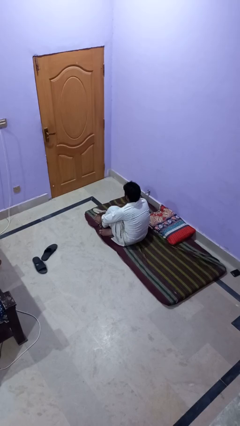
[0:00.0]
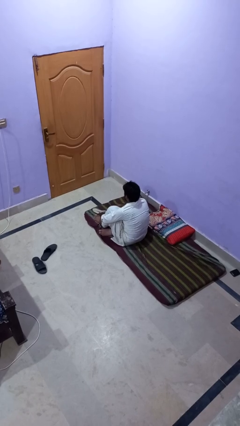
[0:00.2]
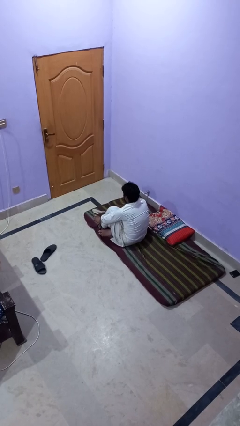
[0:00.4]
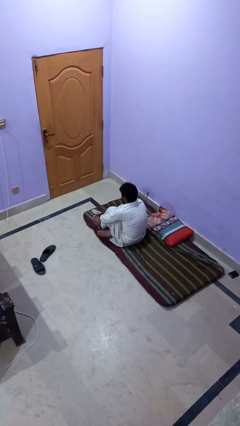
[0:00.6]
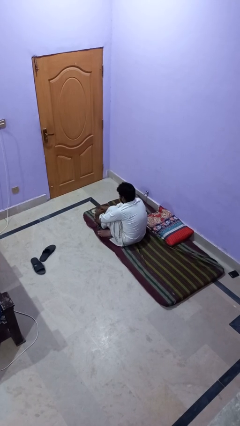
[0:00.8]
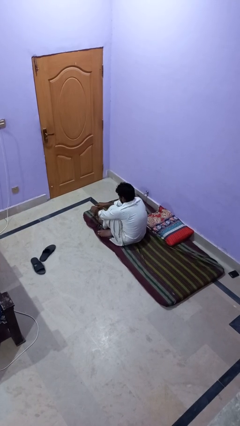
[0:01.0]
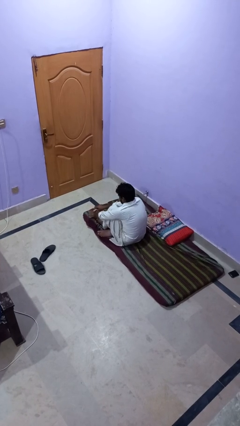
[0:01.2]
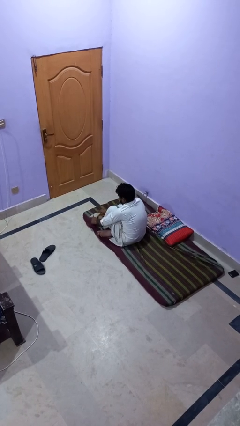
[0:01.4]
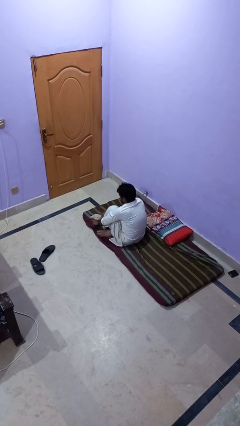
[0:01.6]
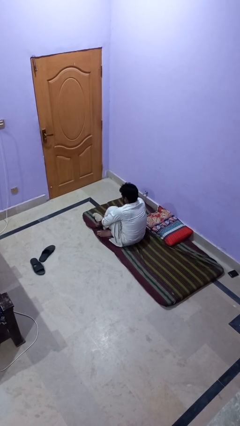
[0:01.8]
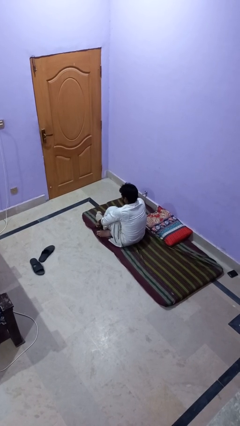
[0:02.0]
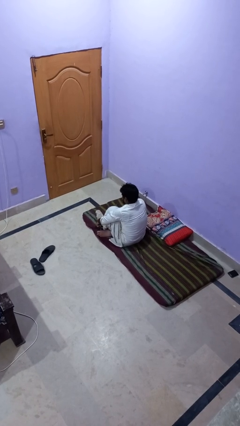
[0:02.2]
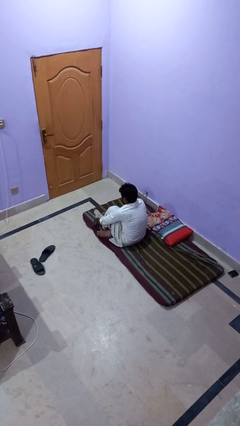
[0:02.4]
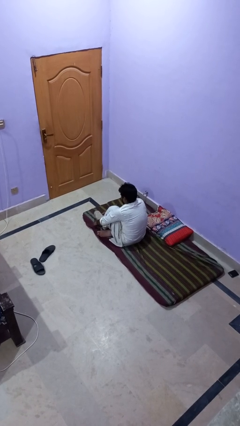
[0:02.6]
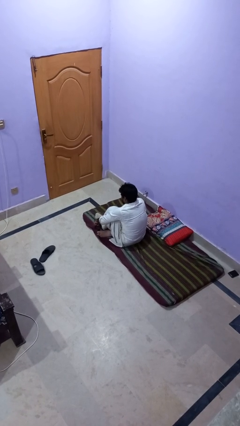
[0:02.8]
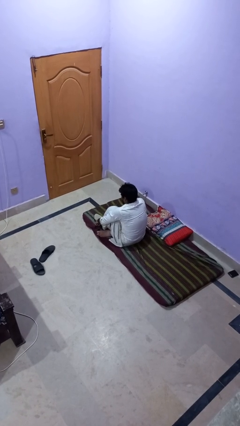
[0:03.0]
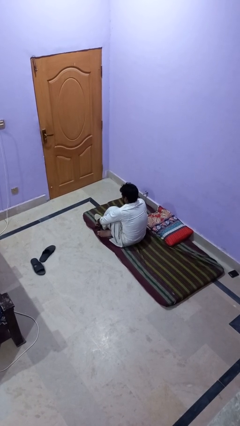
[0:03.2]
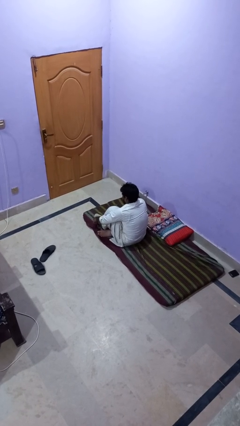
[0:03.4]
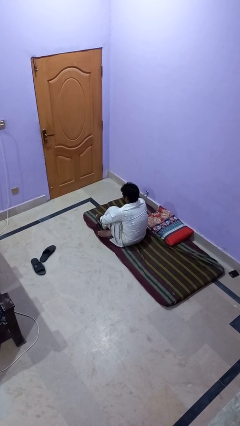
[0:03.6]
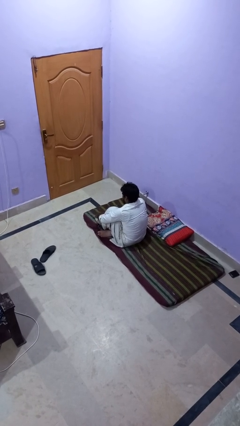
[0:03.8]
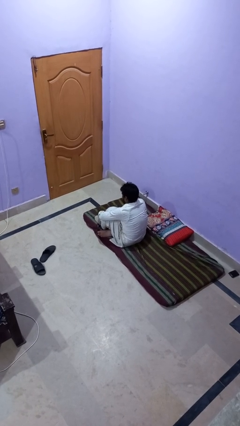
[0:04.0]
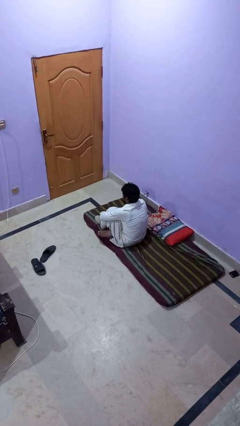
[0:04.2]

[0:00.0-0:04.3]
person puts on socks

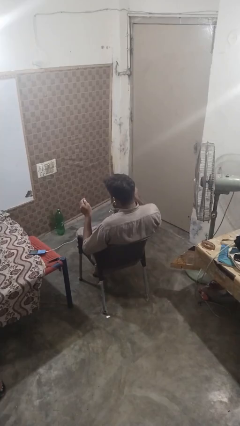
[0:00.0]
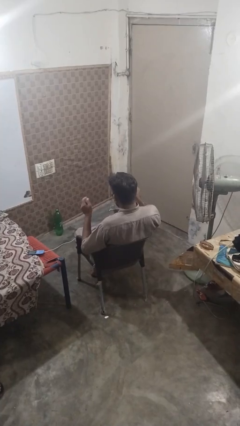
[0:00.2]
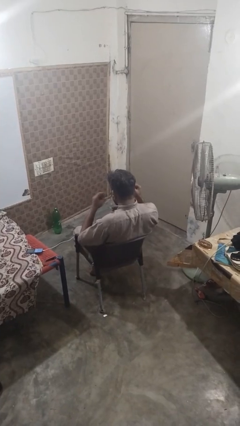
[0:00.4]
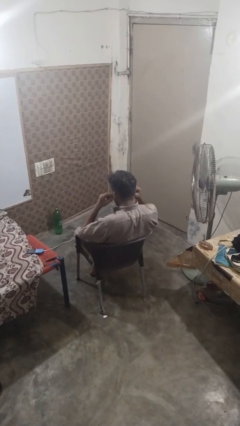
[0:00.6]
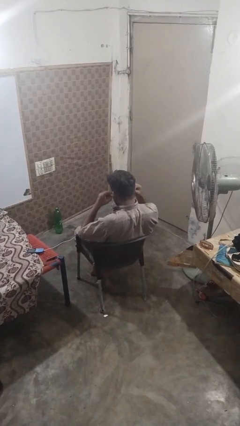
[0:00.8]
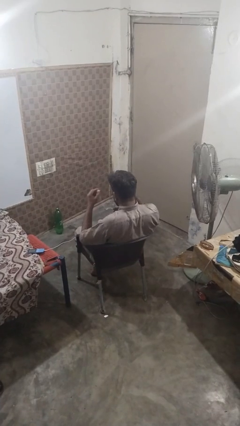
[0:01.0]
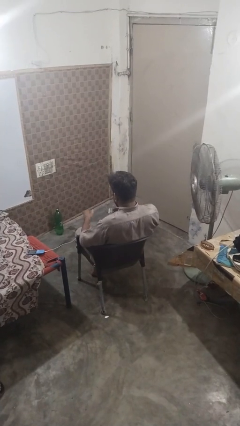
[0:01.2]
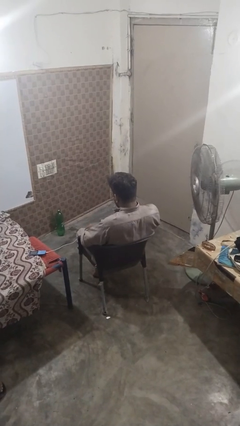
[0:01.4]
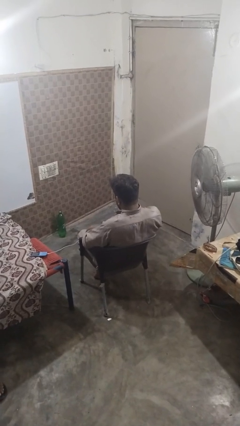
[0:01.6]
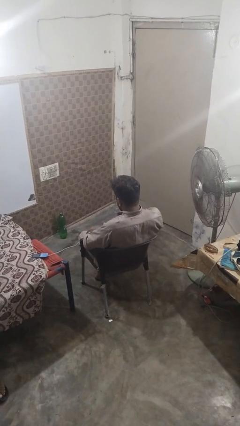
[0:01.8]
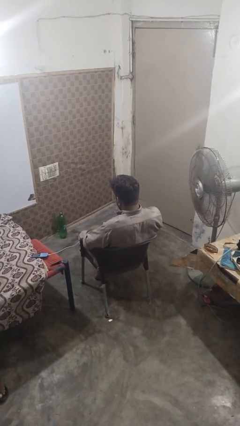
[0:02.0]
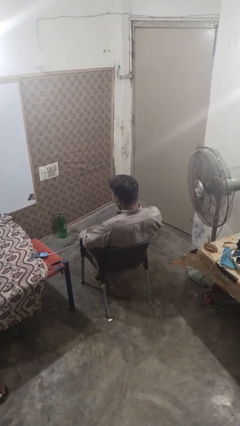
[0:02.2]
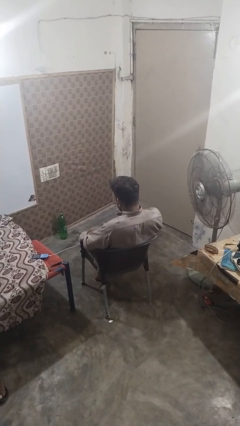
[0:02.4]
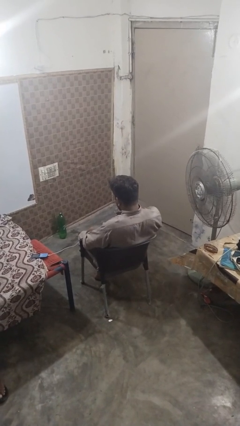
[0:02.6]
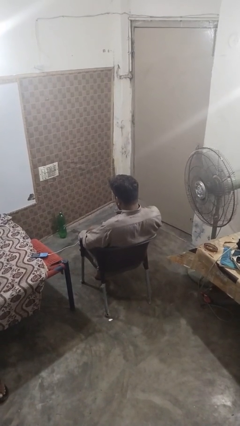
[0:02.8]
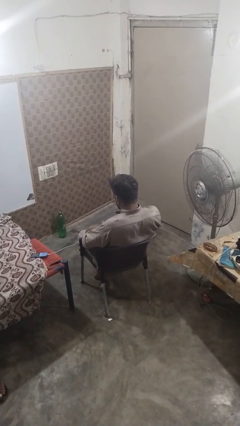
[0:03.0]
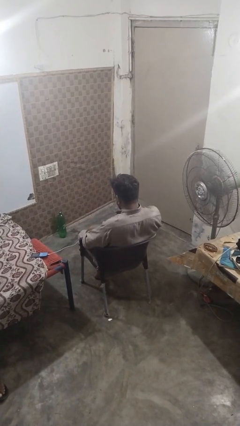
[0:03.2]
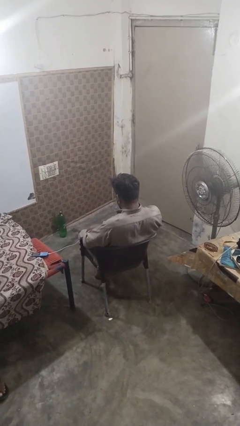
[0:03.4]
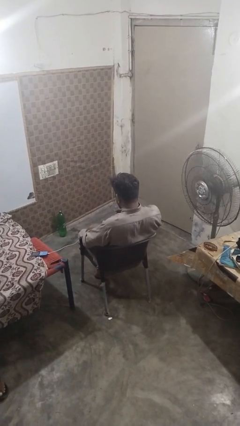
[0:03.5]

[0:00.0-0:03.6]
person takes off headphones

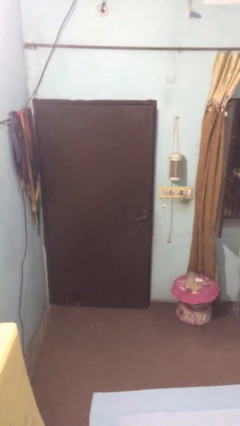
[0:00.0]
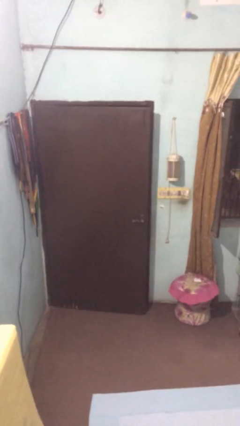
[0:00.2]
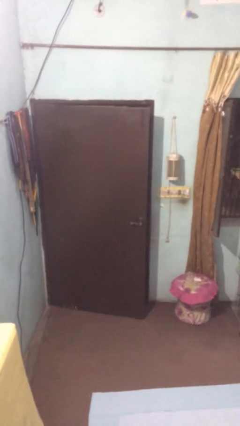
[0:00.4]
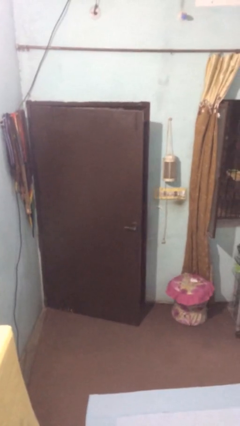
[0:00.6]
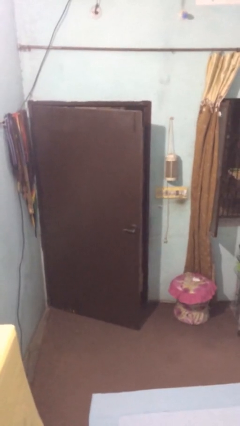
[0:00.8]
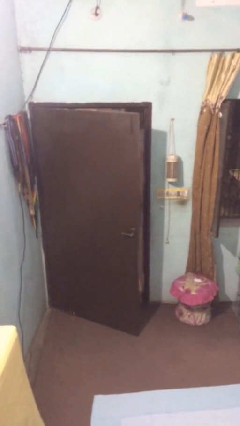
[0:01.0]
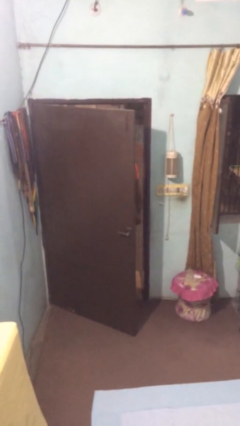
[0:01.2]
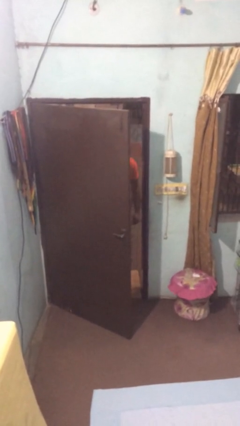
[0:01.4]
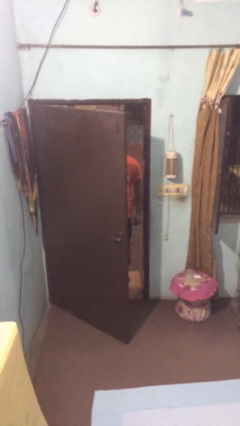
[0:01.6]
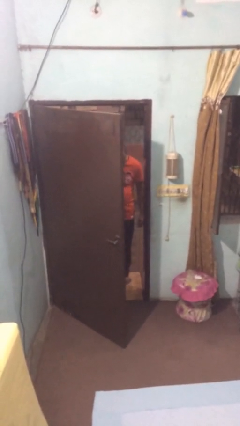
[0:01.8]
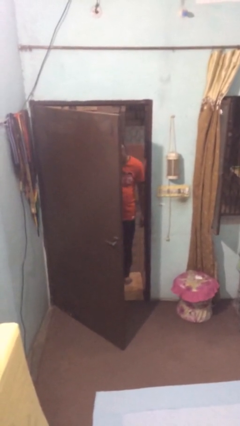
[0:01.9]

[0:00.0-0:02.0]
person opens facility door

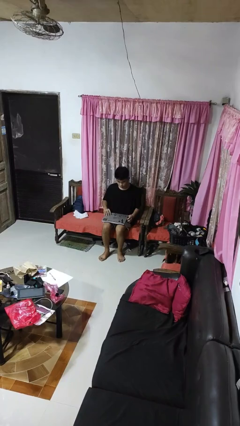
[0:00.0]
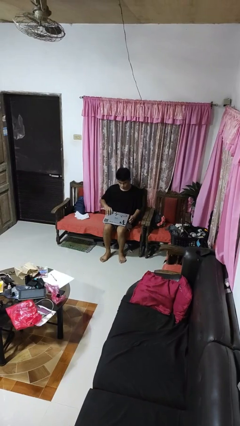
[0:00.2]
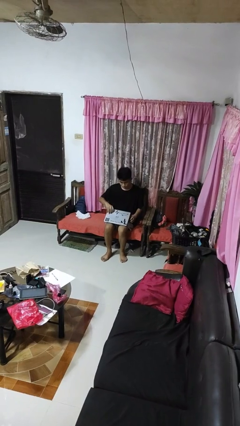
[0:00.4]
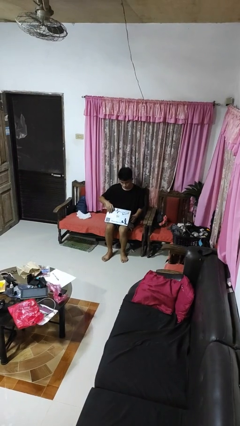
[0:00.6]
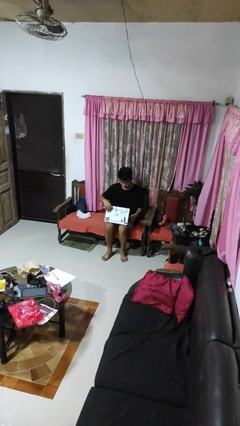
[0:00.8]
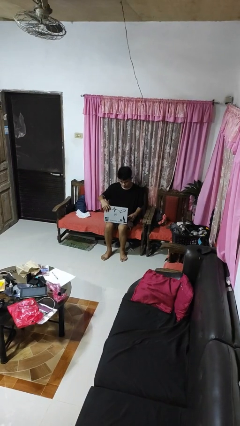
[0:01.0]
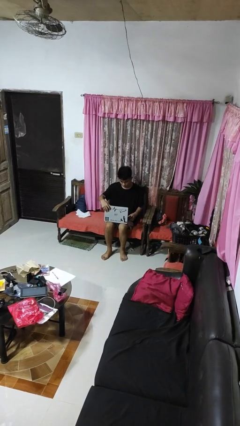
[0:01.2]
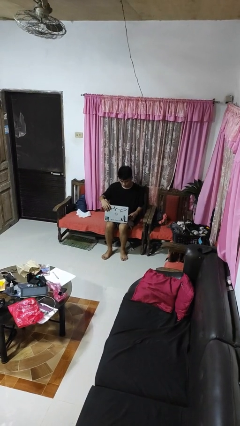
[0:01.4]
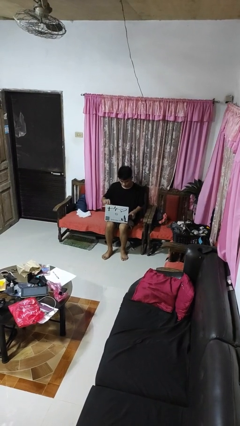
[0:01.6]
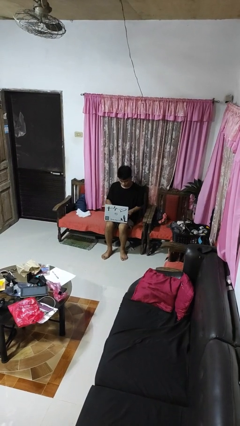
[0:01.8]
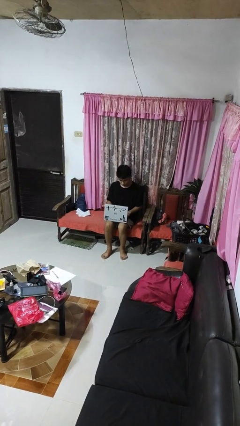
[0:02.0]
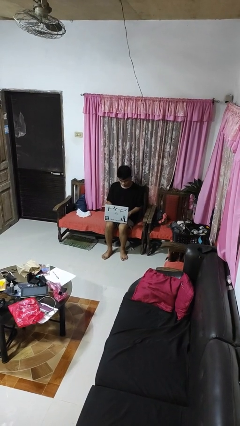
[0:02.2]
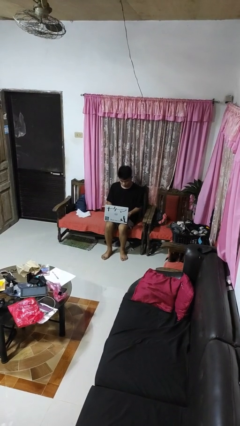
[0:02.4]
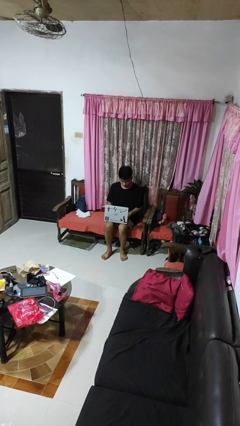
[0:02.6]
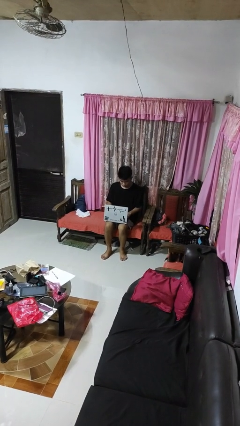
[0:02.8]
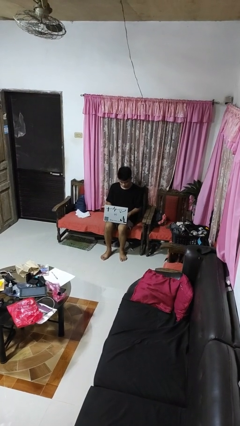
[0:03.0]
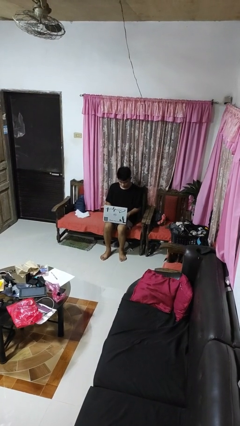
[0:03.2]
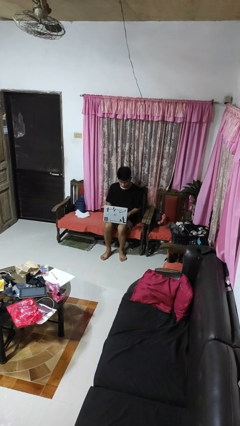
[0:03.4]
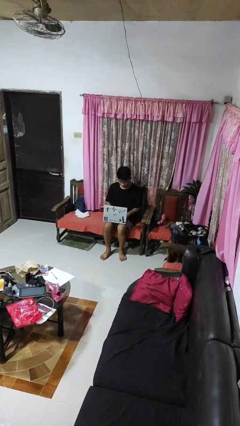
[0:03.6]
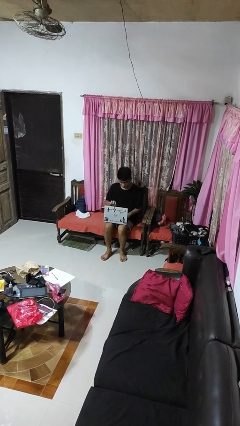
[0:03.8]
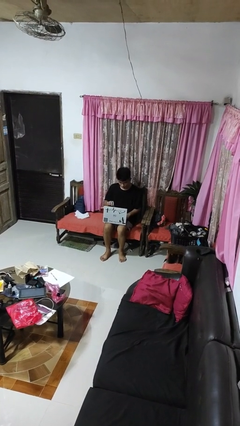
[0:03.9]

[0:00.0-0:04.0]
person opens laptop

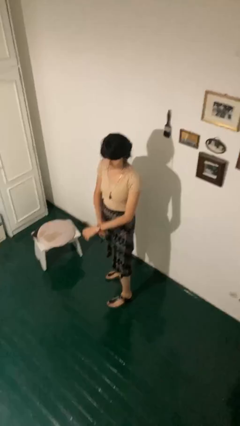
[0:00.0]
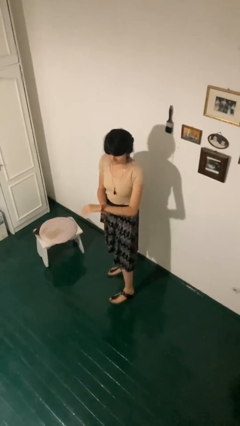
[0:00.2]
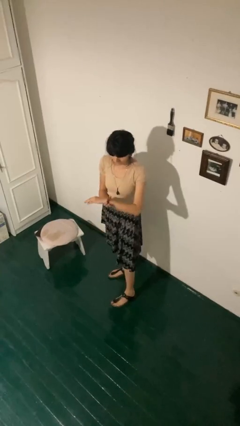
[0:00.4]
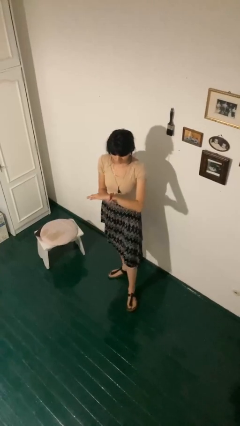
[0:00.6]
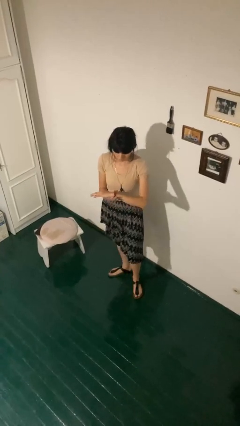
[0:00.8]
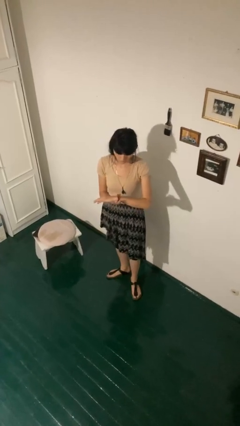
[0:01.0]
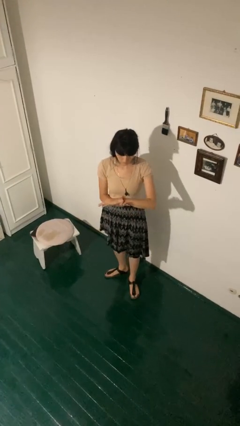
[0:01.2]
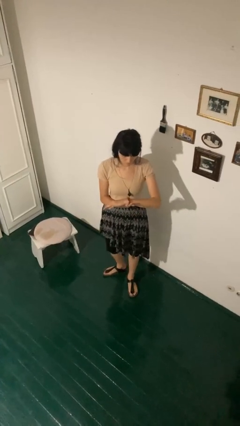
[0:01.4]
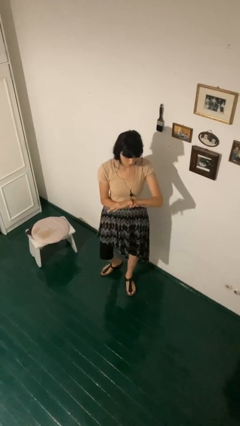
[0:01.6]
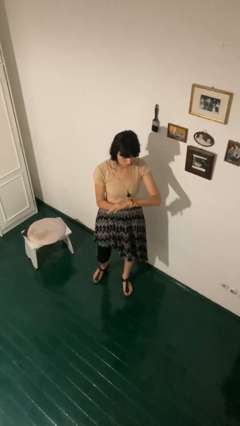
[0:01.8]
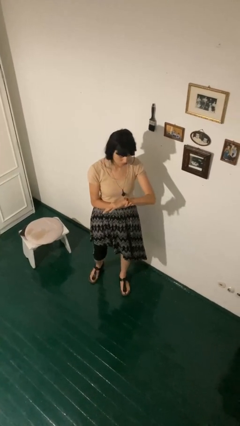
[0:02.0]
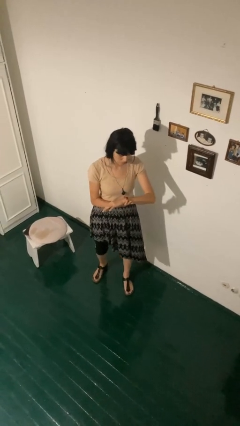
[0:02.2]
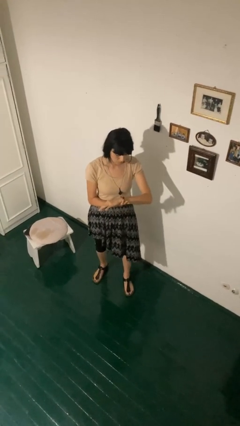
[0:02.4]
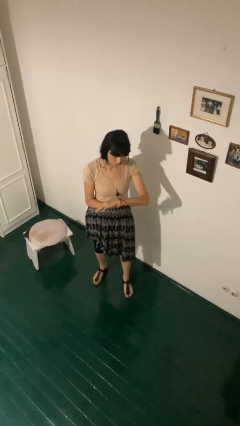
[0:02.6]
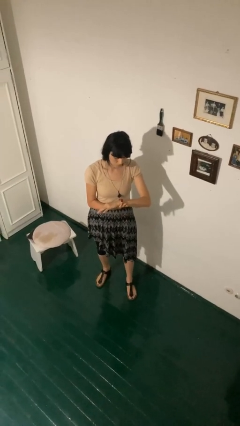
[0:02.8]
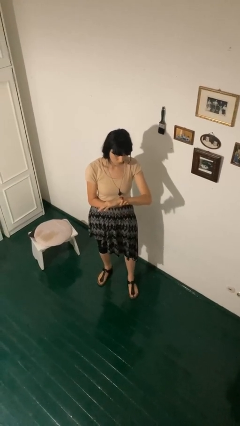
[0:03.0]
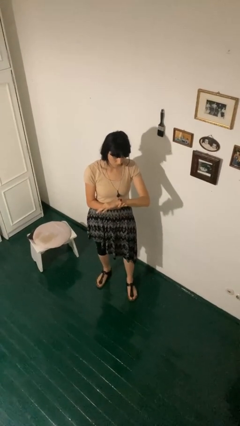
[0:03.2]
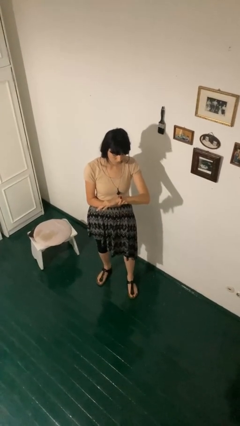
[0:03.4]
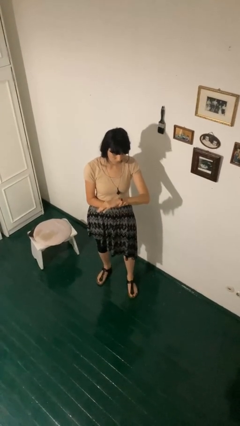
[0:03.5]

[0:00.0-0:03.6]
person looks at wristwatch
